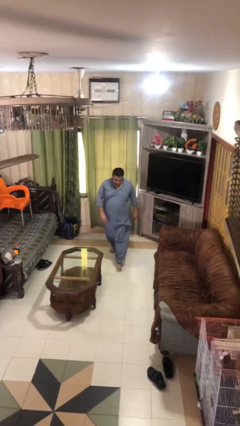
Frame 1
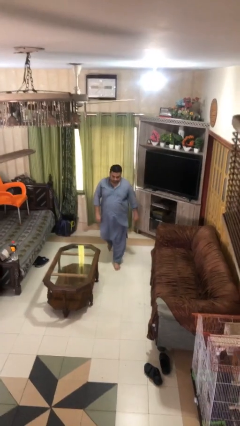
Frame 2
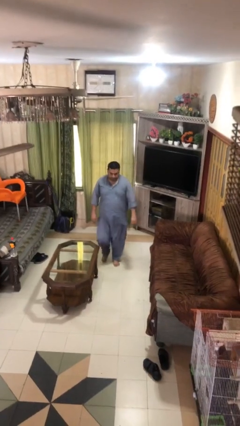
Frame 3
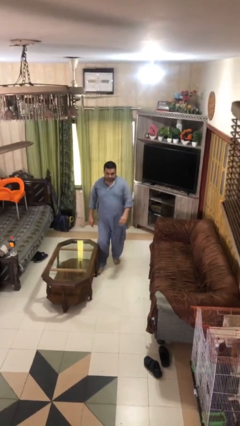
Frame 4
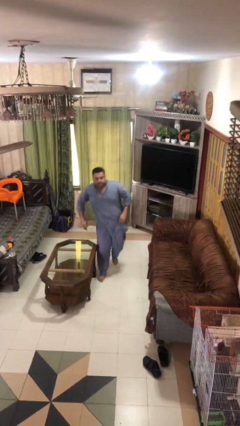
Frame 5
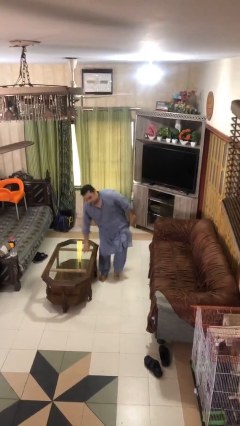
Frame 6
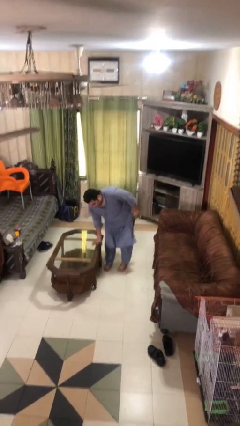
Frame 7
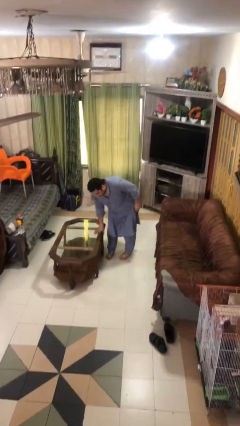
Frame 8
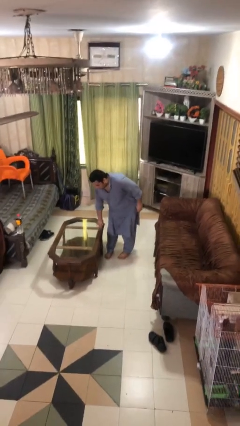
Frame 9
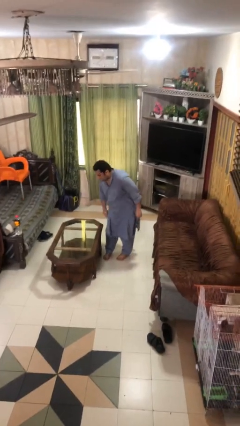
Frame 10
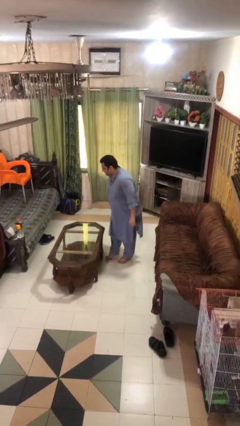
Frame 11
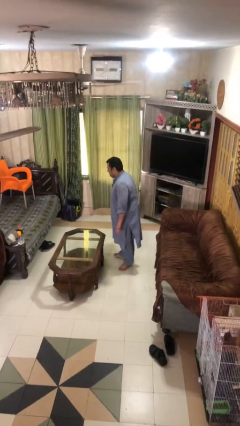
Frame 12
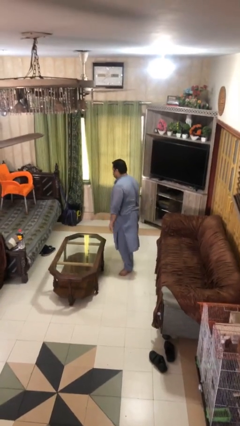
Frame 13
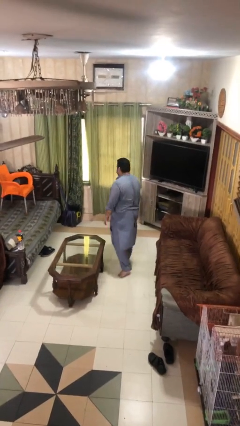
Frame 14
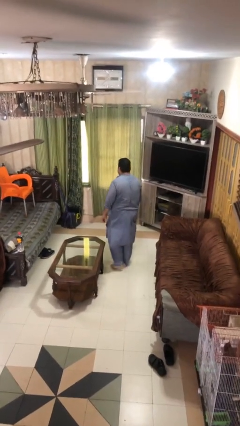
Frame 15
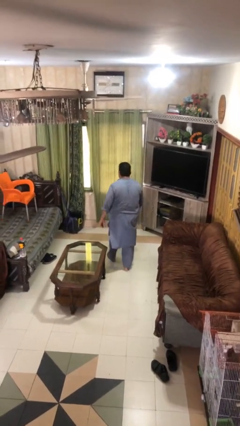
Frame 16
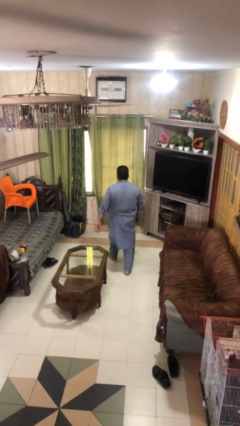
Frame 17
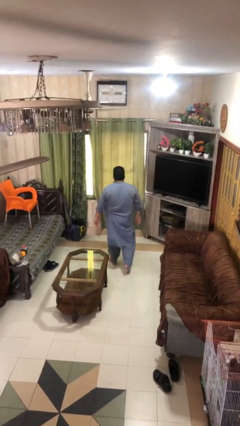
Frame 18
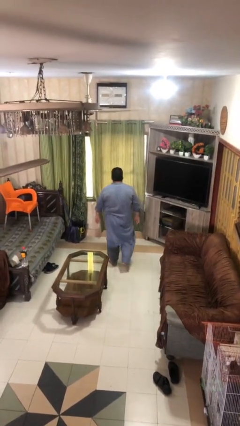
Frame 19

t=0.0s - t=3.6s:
person bumps into table

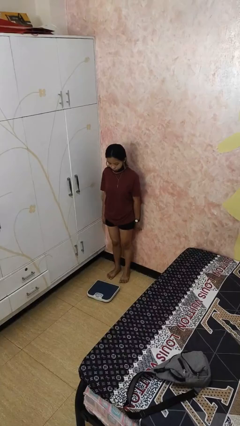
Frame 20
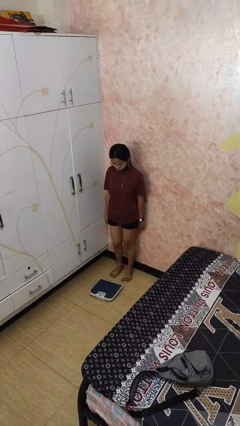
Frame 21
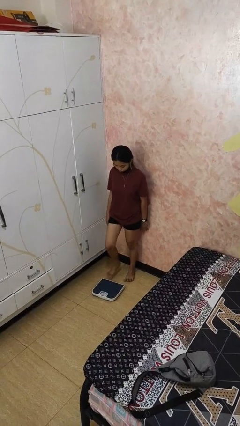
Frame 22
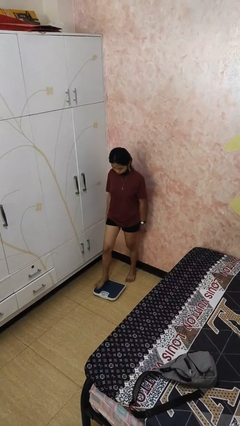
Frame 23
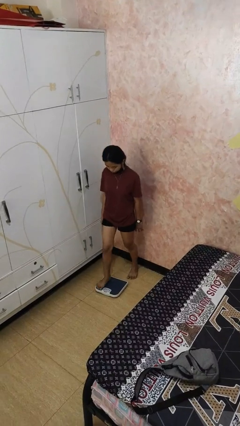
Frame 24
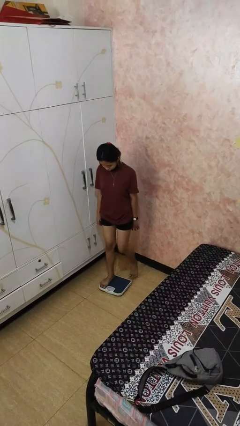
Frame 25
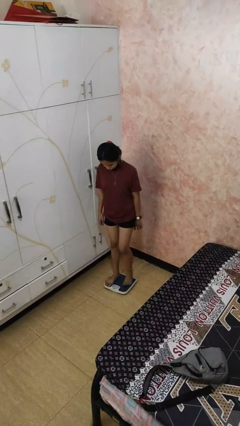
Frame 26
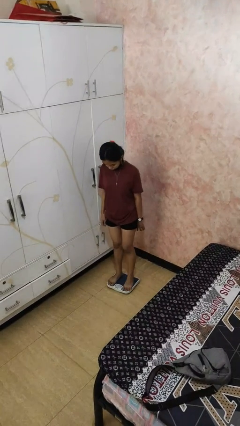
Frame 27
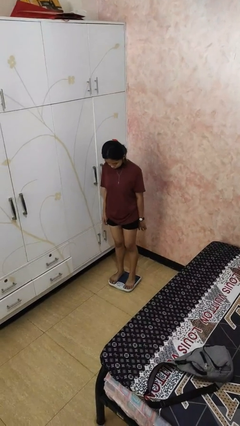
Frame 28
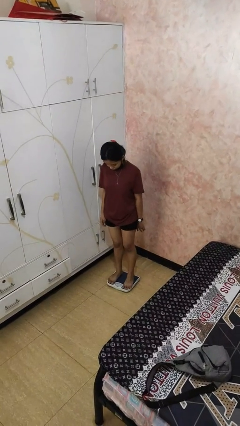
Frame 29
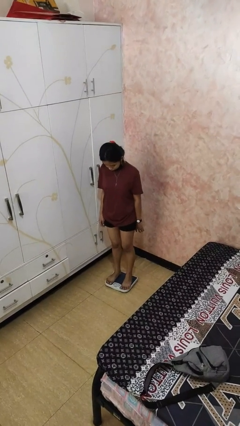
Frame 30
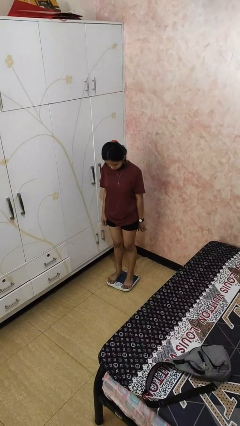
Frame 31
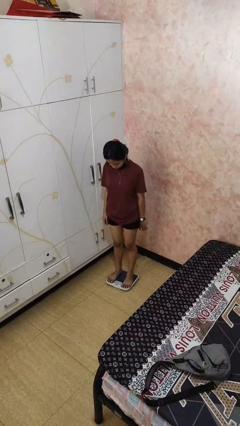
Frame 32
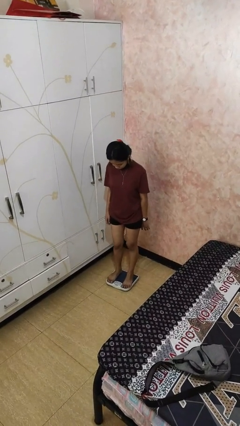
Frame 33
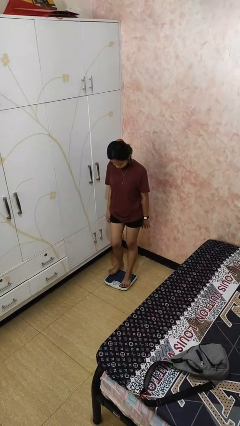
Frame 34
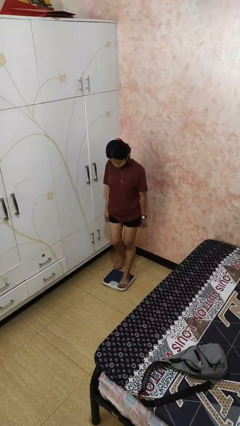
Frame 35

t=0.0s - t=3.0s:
person uses bodyweight scale

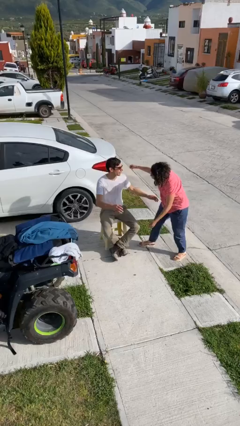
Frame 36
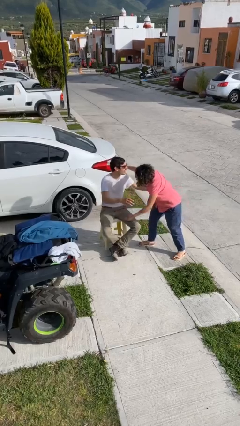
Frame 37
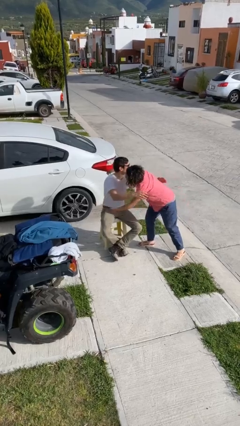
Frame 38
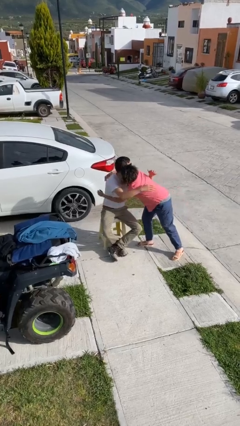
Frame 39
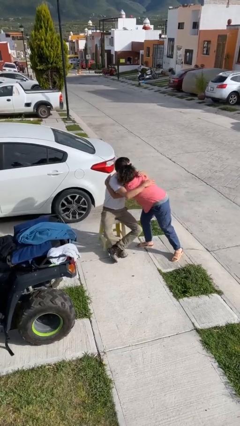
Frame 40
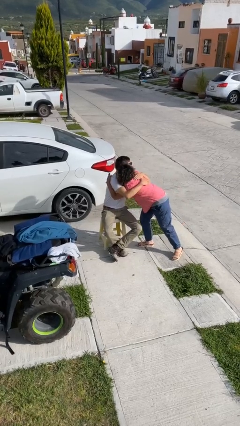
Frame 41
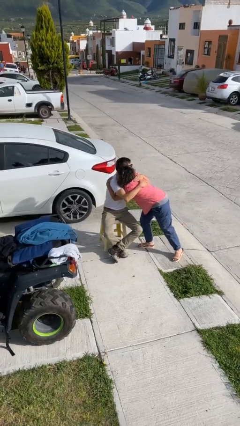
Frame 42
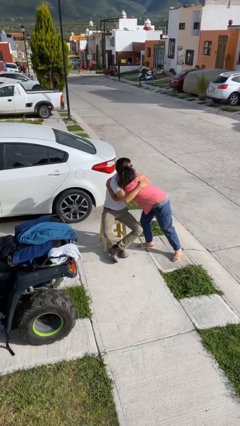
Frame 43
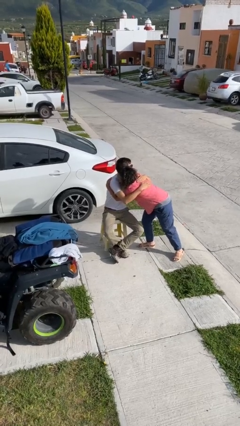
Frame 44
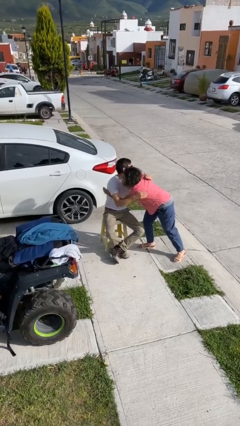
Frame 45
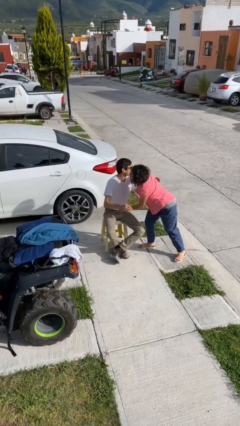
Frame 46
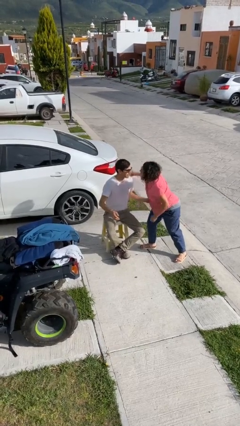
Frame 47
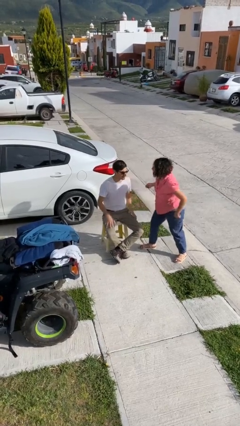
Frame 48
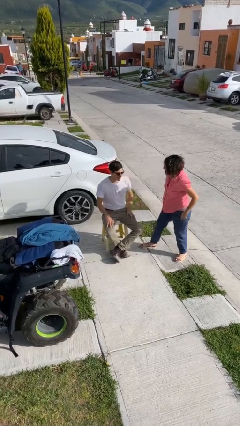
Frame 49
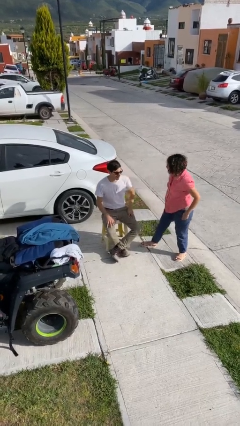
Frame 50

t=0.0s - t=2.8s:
person embraces person

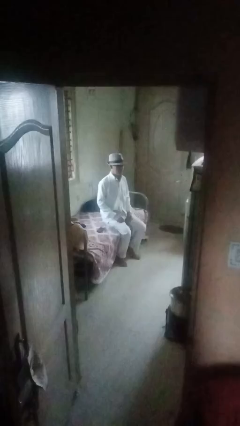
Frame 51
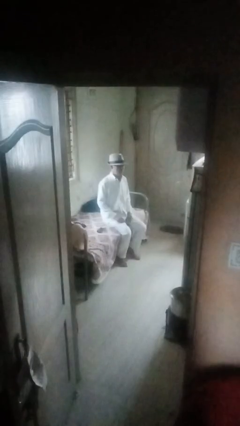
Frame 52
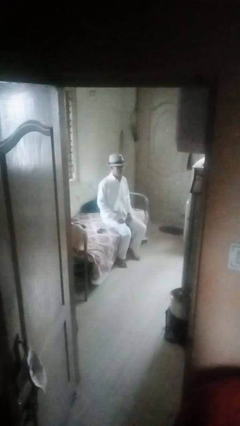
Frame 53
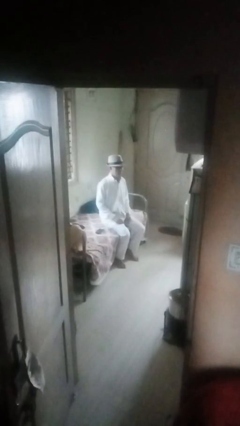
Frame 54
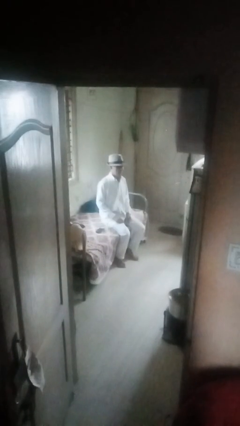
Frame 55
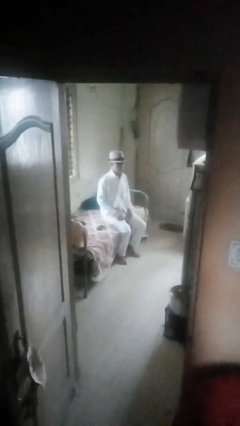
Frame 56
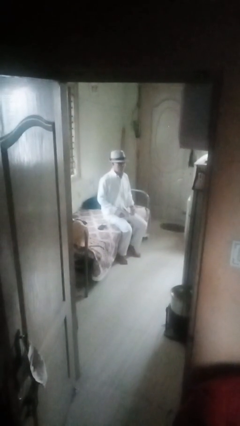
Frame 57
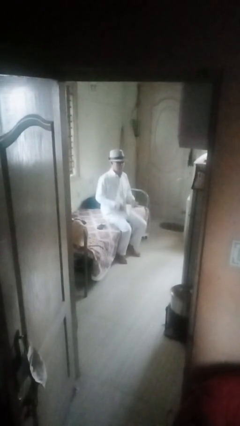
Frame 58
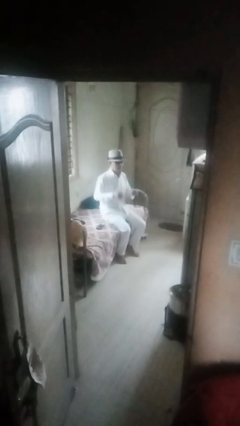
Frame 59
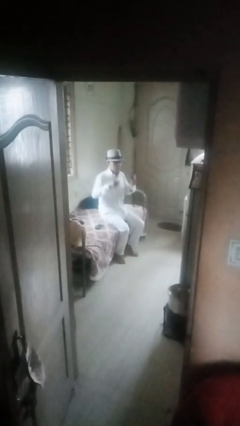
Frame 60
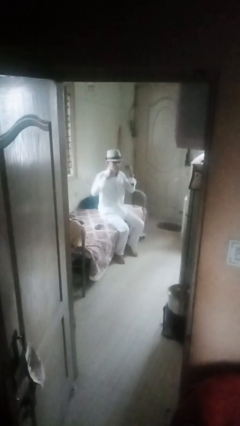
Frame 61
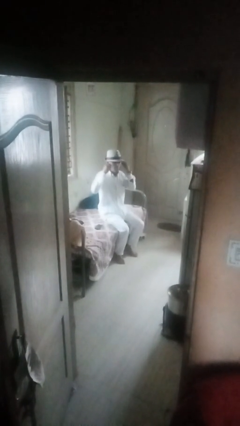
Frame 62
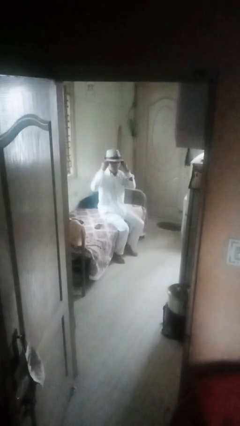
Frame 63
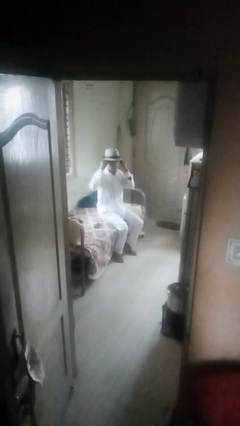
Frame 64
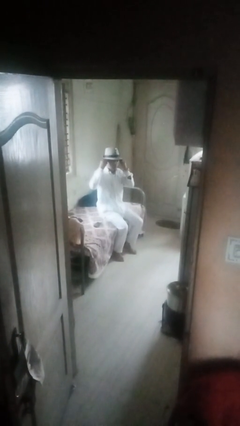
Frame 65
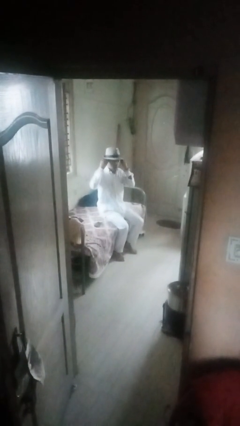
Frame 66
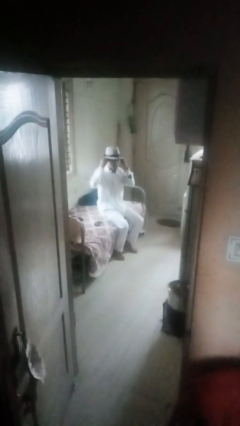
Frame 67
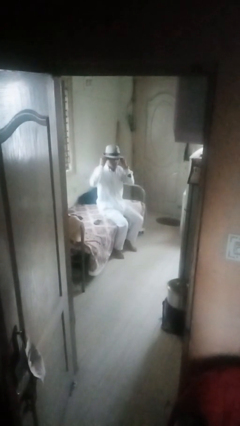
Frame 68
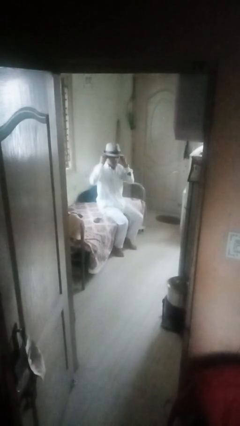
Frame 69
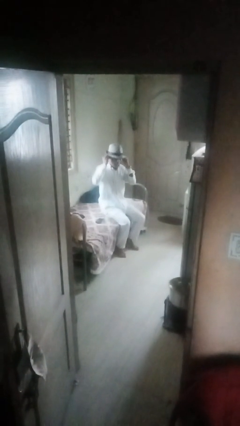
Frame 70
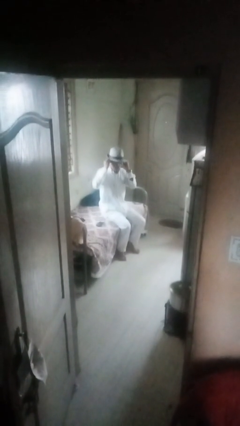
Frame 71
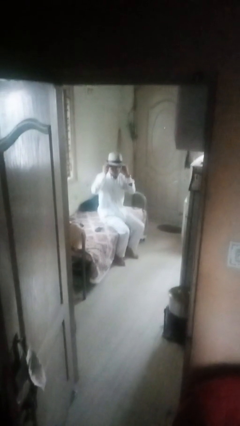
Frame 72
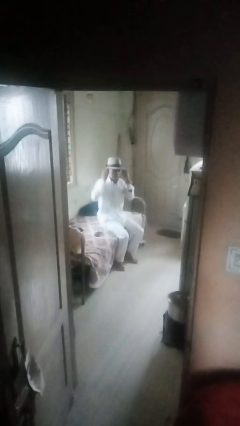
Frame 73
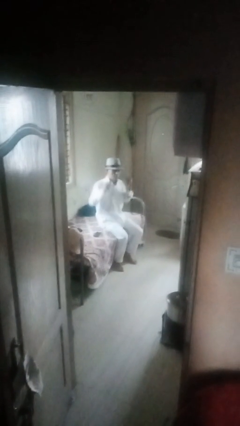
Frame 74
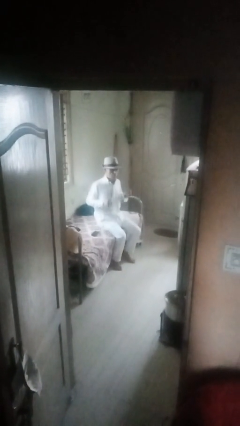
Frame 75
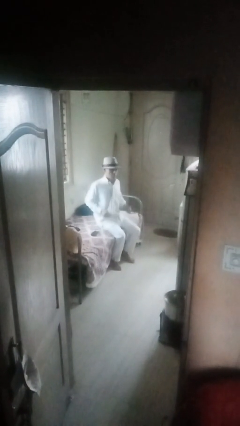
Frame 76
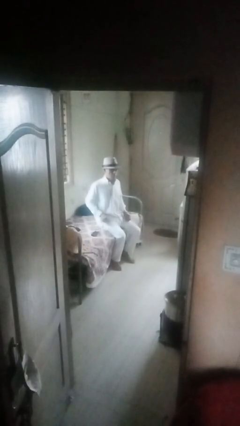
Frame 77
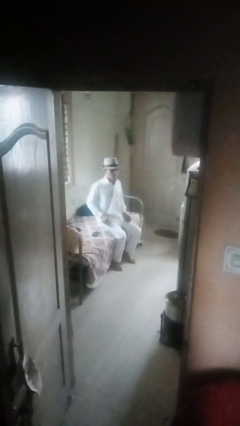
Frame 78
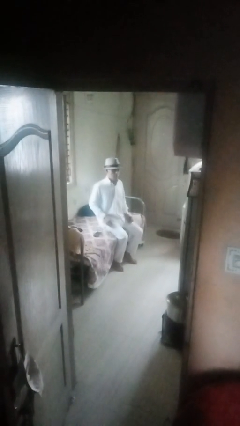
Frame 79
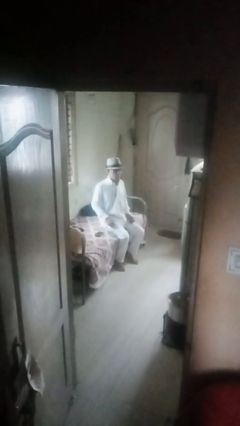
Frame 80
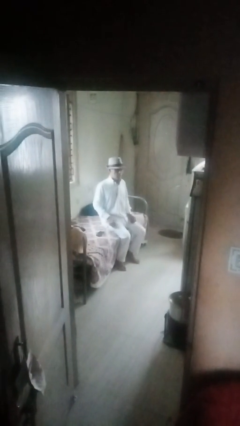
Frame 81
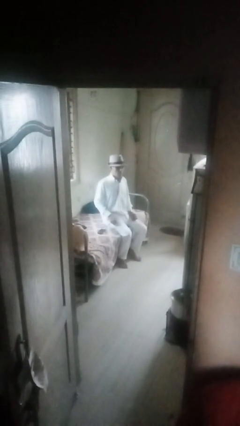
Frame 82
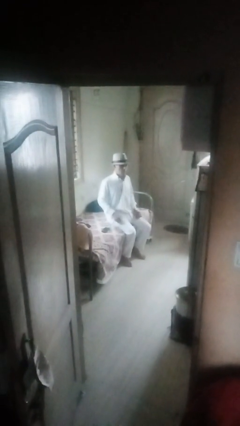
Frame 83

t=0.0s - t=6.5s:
person puts on headphones

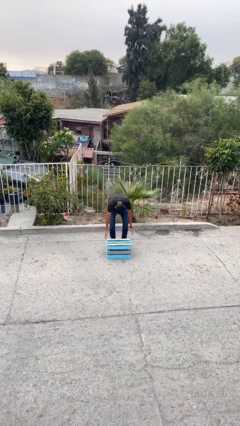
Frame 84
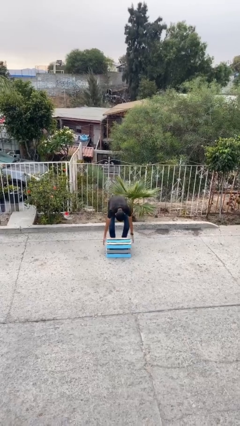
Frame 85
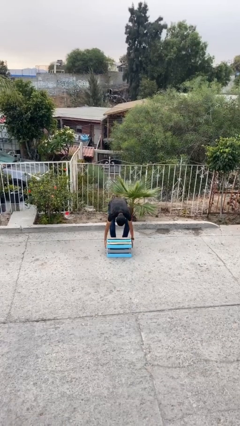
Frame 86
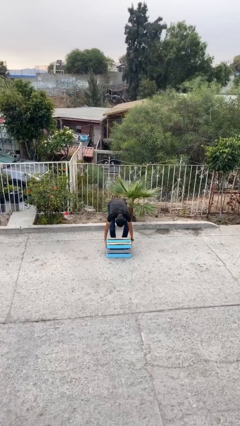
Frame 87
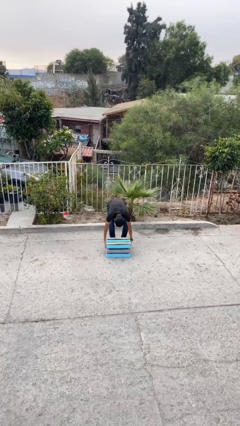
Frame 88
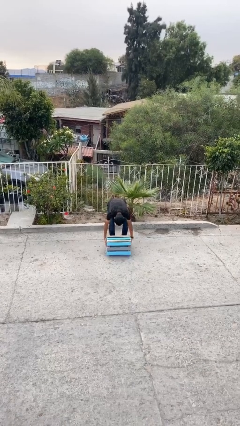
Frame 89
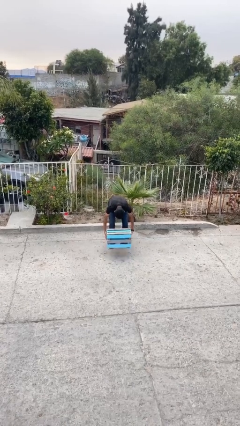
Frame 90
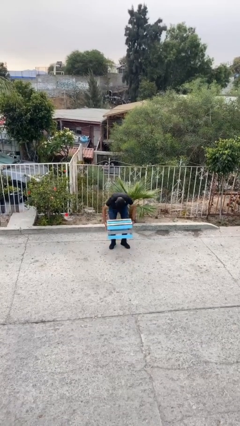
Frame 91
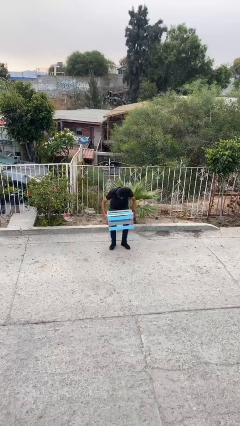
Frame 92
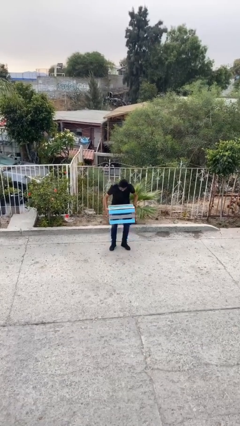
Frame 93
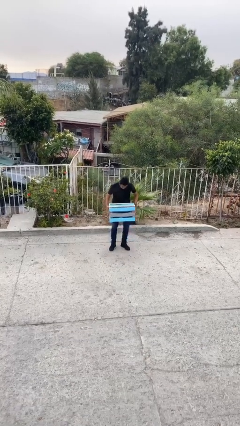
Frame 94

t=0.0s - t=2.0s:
person picks up object from floor
